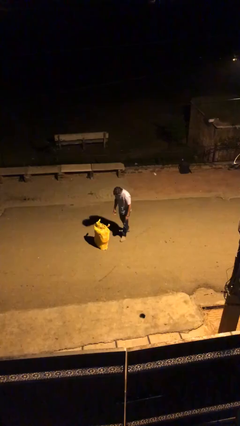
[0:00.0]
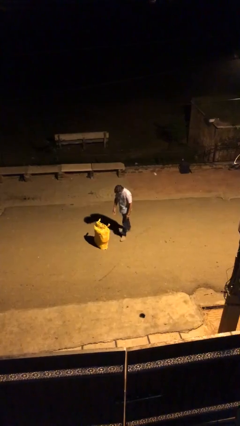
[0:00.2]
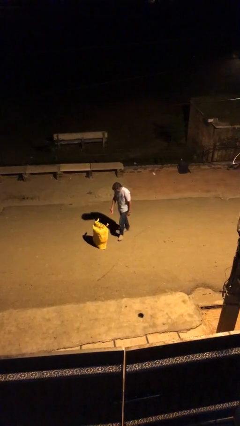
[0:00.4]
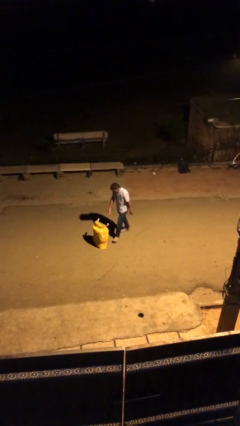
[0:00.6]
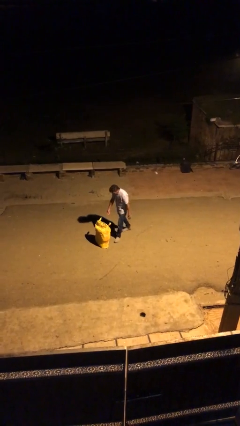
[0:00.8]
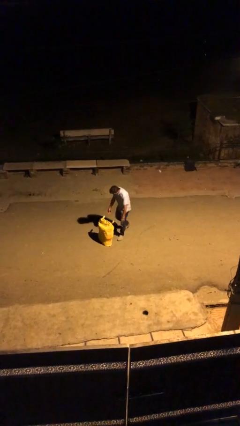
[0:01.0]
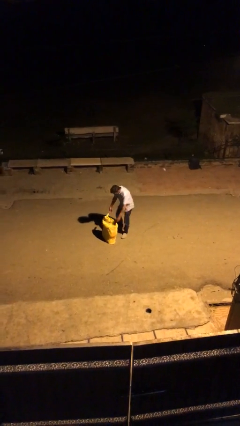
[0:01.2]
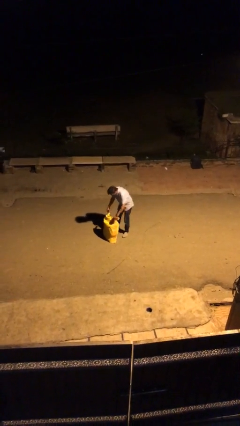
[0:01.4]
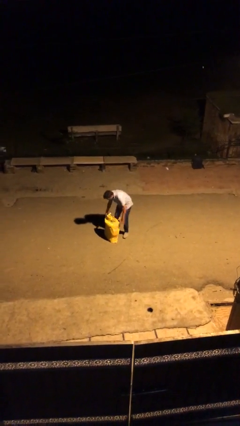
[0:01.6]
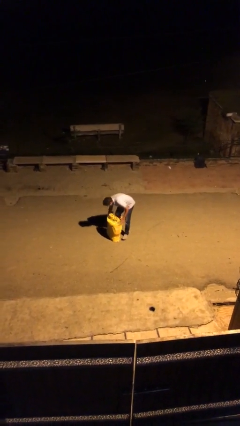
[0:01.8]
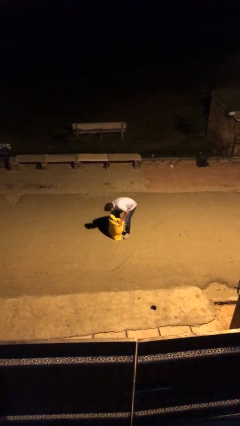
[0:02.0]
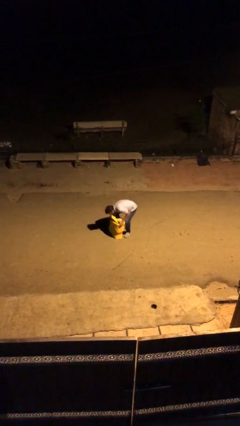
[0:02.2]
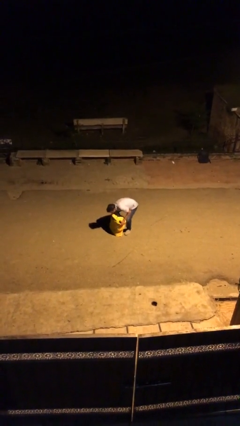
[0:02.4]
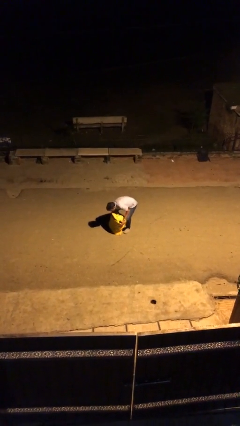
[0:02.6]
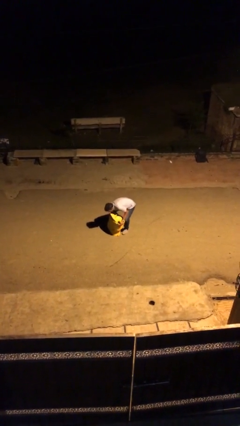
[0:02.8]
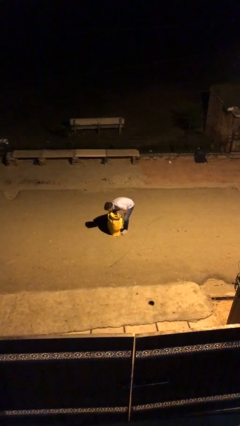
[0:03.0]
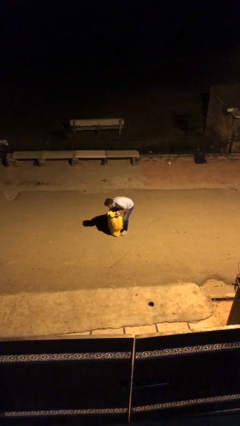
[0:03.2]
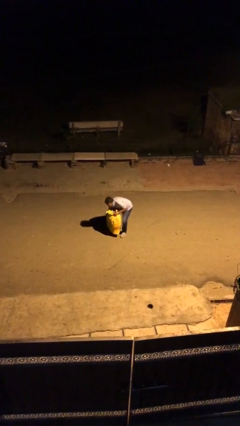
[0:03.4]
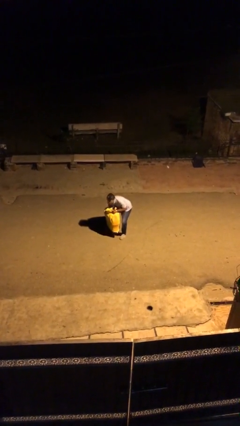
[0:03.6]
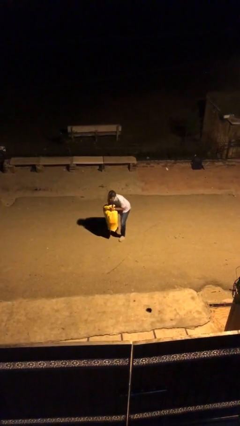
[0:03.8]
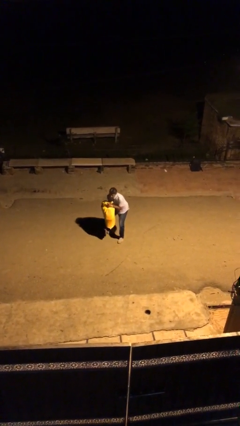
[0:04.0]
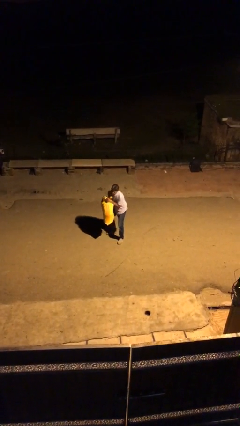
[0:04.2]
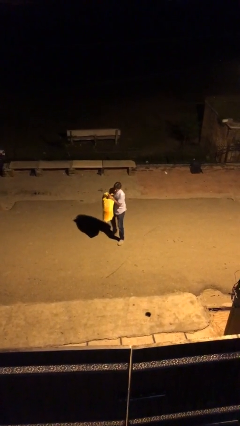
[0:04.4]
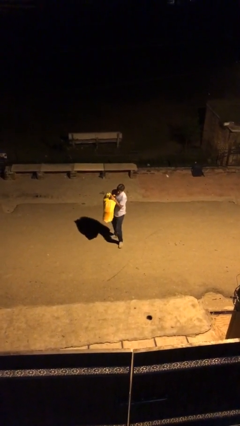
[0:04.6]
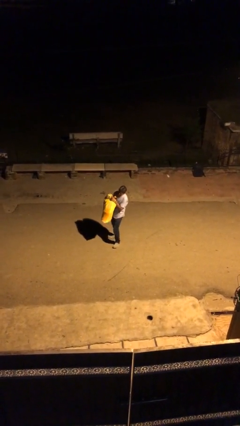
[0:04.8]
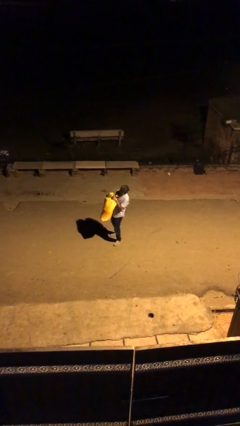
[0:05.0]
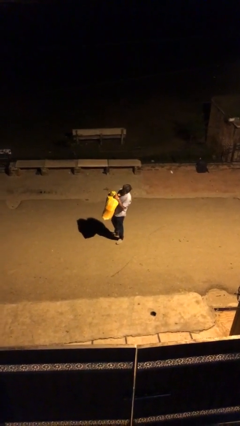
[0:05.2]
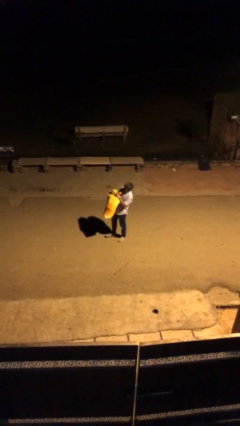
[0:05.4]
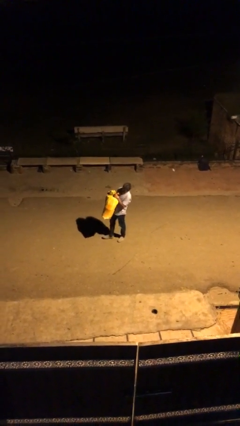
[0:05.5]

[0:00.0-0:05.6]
person picks up object from floor

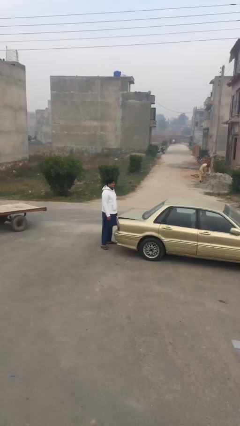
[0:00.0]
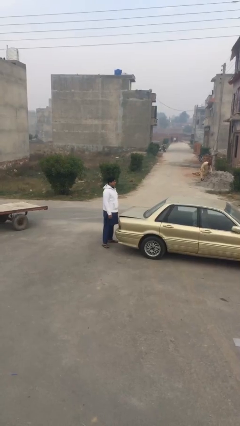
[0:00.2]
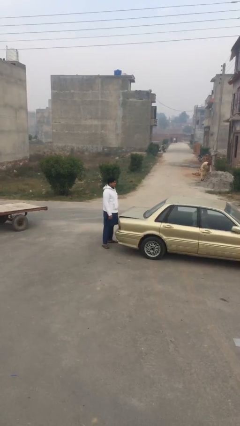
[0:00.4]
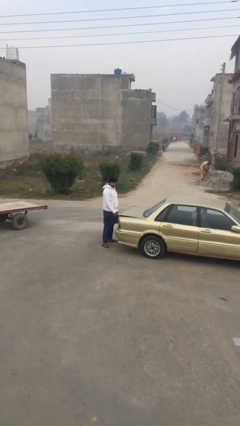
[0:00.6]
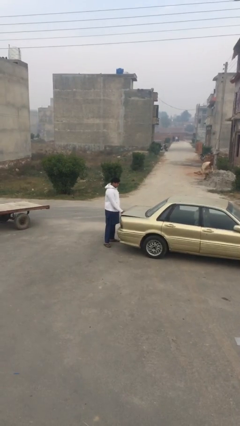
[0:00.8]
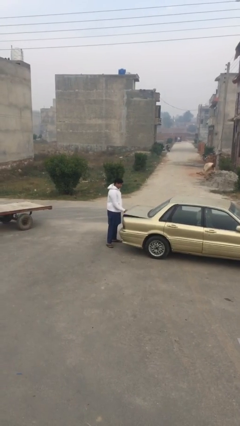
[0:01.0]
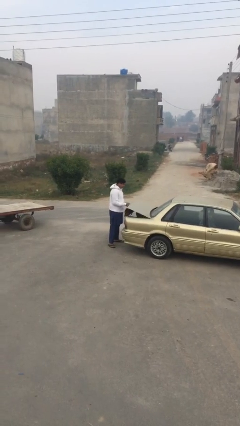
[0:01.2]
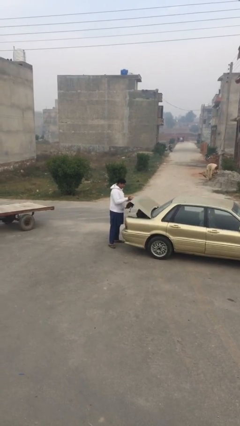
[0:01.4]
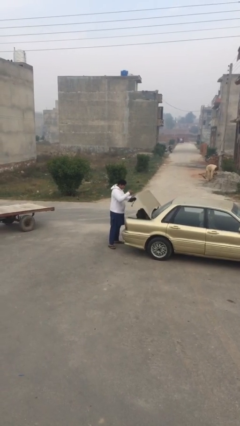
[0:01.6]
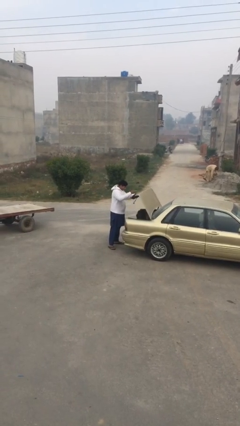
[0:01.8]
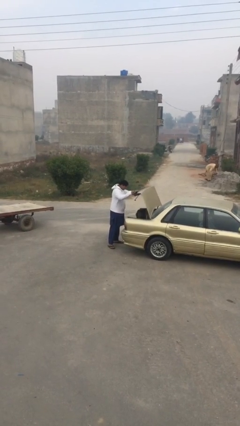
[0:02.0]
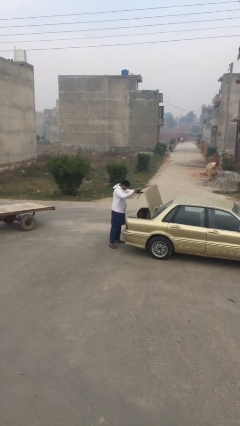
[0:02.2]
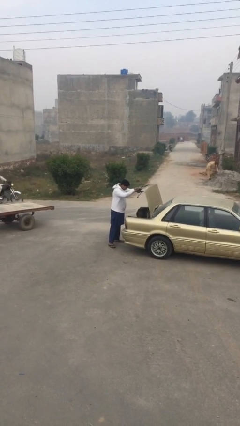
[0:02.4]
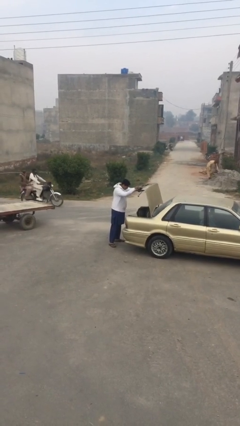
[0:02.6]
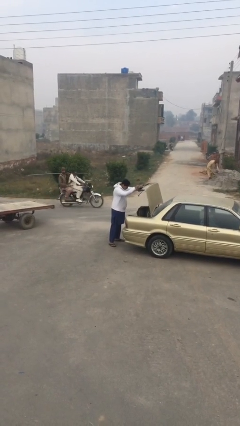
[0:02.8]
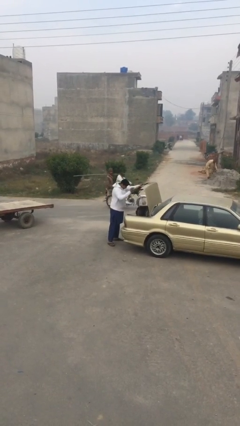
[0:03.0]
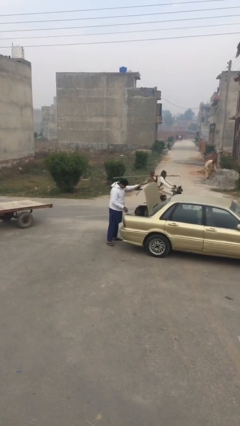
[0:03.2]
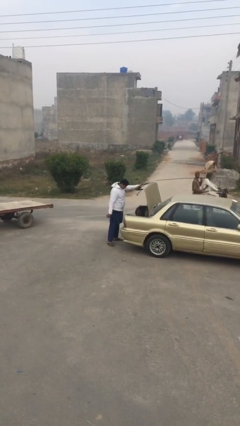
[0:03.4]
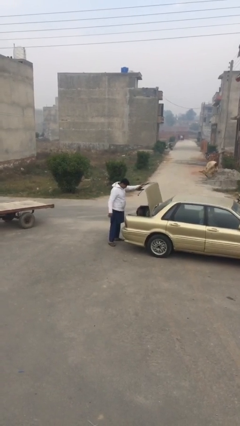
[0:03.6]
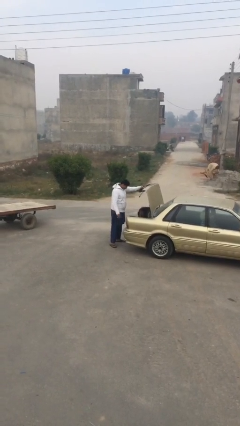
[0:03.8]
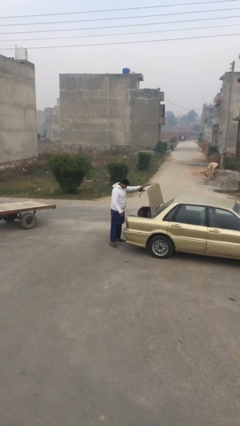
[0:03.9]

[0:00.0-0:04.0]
person opens car trunk

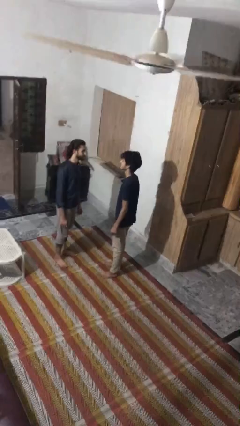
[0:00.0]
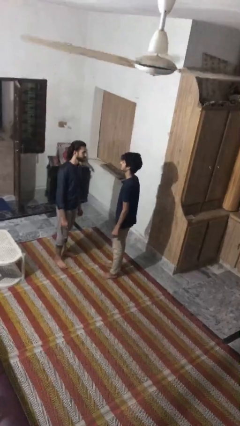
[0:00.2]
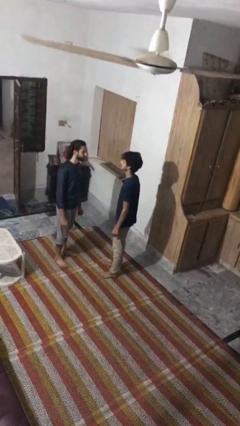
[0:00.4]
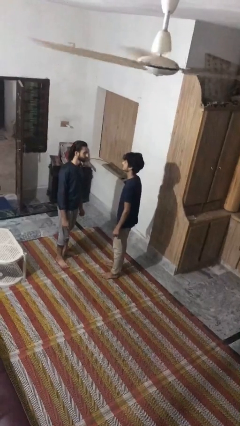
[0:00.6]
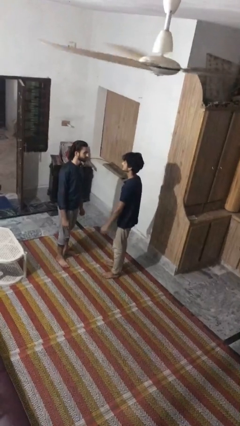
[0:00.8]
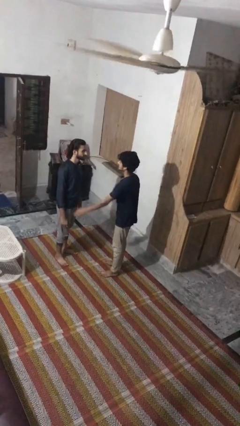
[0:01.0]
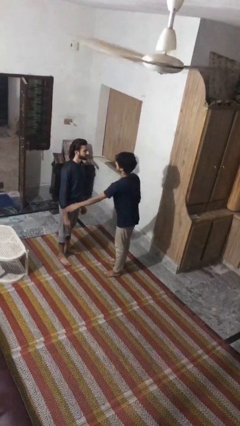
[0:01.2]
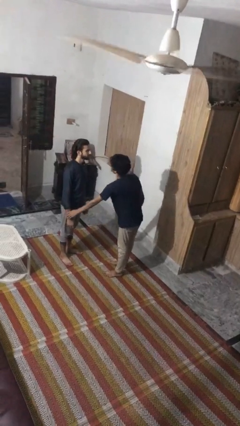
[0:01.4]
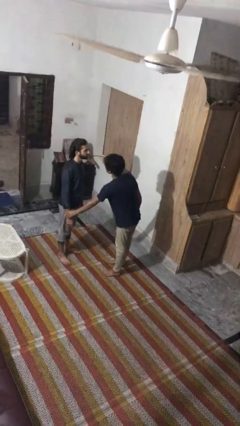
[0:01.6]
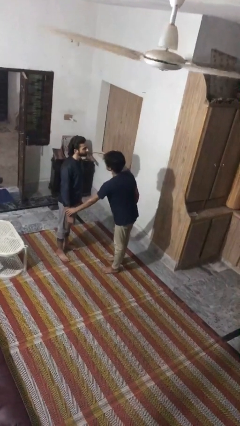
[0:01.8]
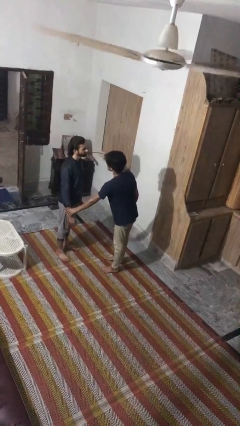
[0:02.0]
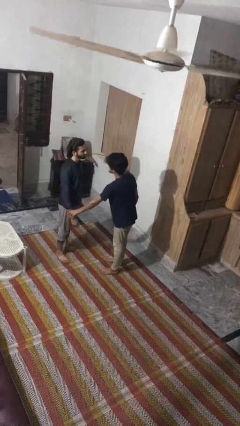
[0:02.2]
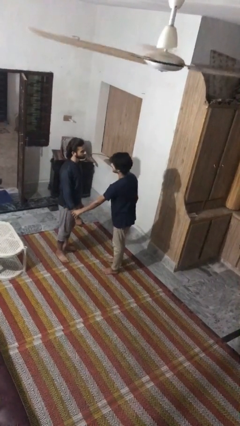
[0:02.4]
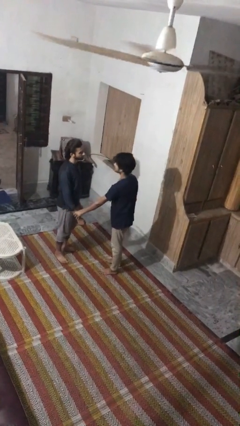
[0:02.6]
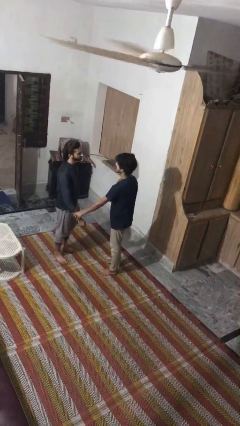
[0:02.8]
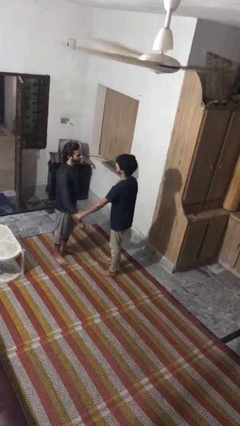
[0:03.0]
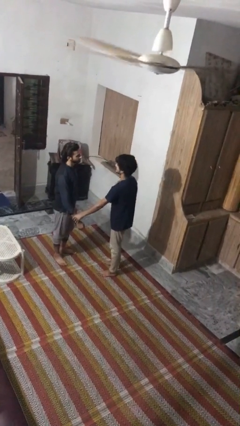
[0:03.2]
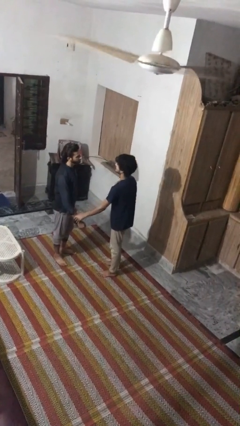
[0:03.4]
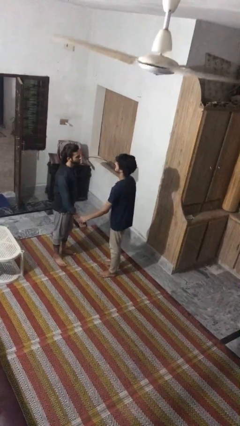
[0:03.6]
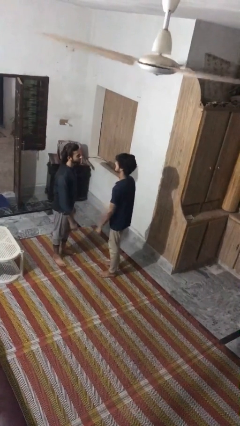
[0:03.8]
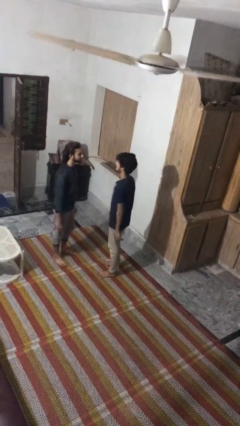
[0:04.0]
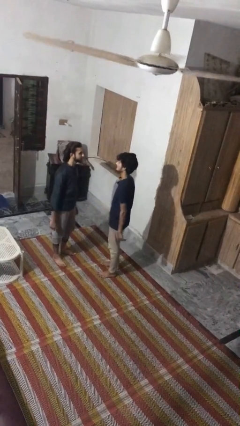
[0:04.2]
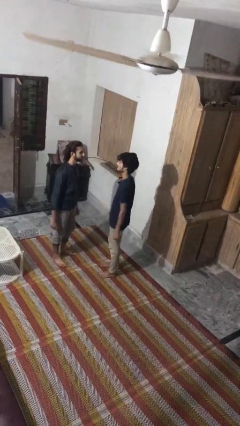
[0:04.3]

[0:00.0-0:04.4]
person grabs person by forearm

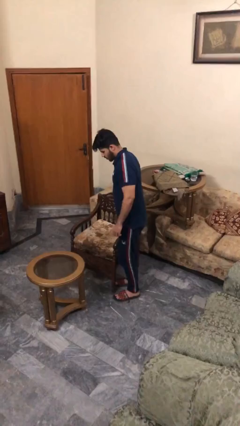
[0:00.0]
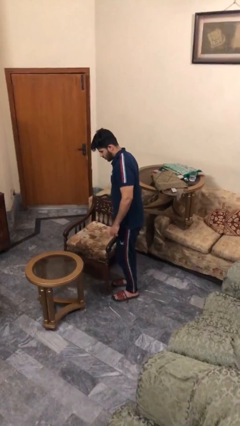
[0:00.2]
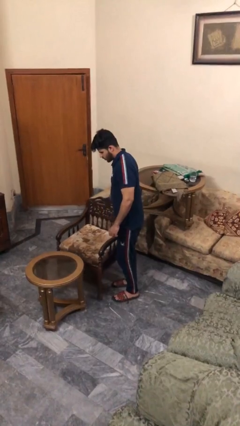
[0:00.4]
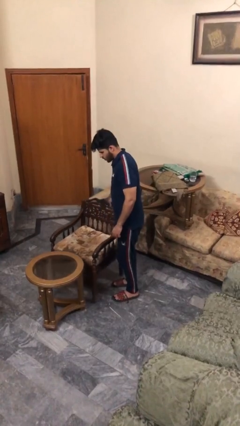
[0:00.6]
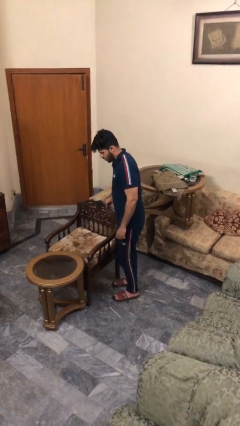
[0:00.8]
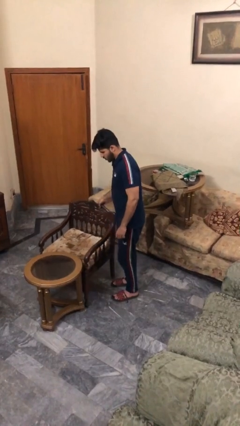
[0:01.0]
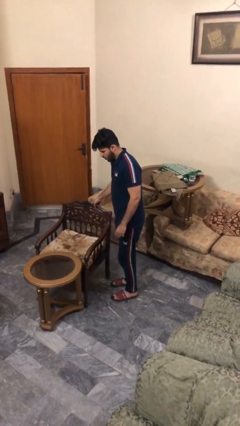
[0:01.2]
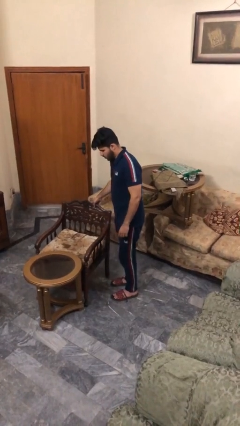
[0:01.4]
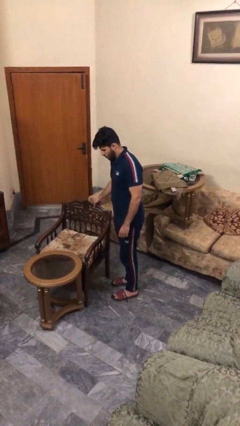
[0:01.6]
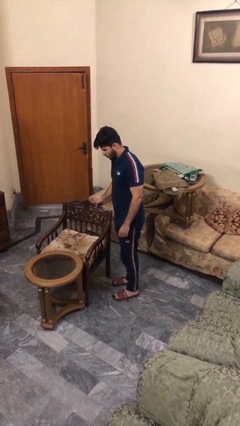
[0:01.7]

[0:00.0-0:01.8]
person pushes in chair

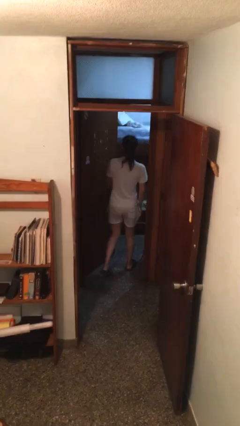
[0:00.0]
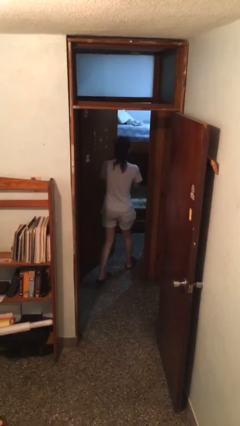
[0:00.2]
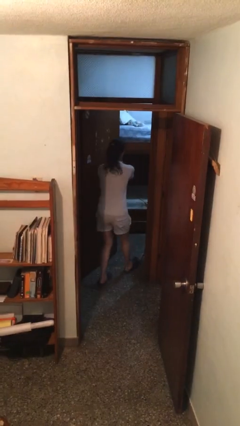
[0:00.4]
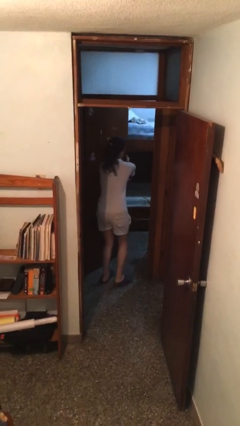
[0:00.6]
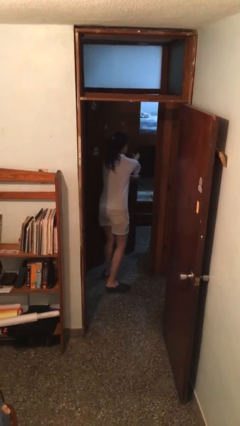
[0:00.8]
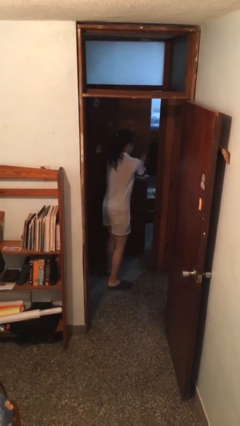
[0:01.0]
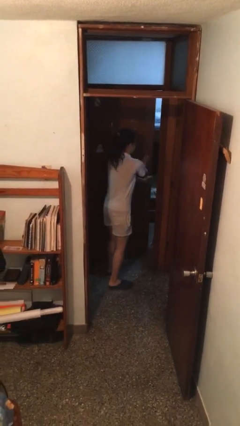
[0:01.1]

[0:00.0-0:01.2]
person closes facility door

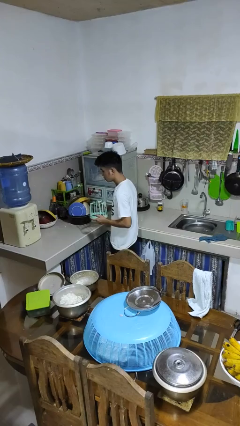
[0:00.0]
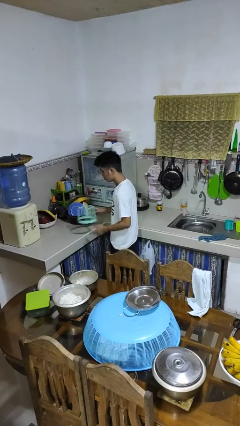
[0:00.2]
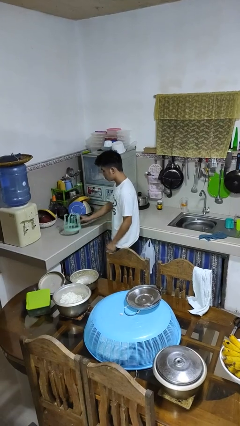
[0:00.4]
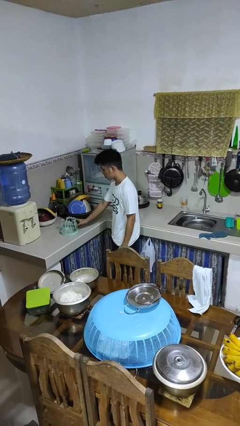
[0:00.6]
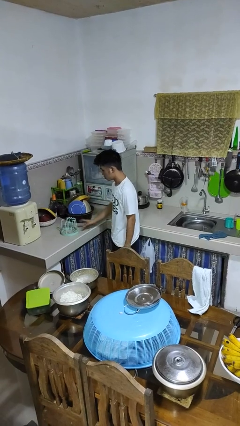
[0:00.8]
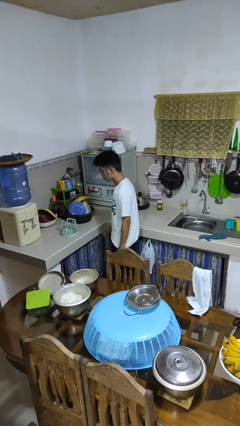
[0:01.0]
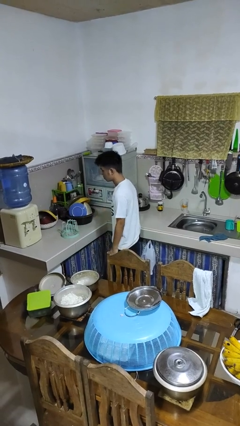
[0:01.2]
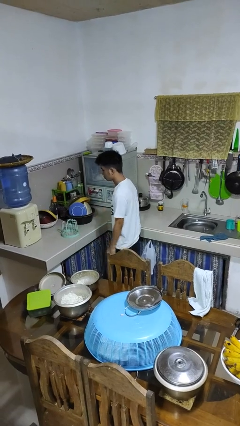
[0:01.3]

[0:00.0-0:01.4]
person puts down object on countertop
